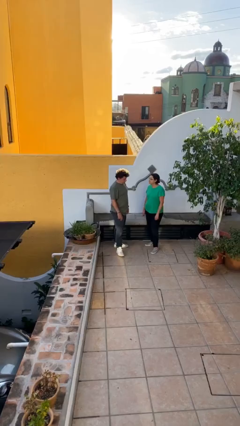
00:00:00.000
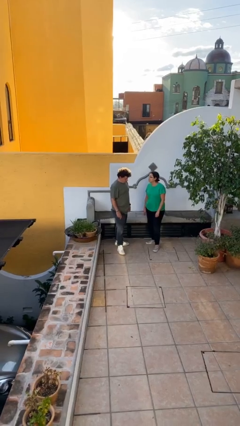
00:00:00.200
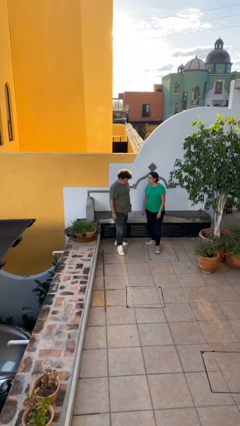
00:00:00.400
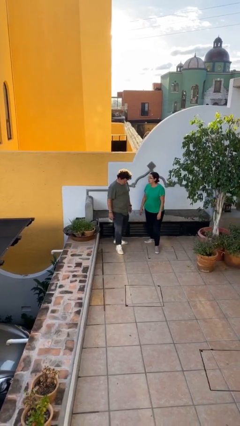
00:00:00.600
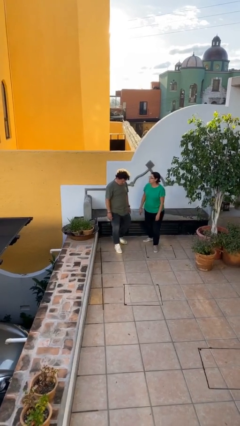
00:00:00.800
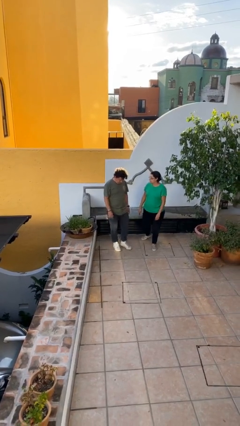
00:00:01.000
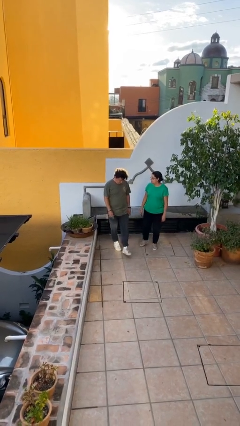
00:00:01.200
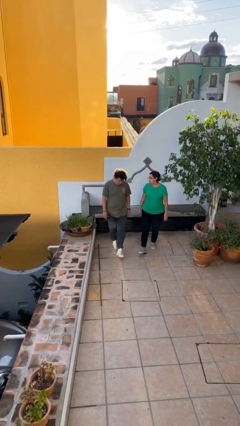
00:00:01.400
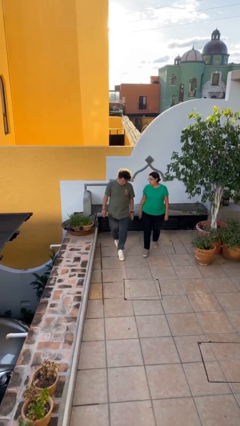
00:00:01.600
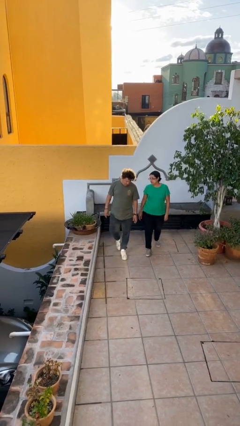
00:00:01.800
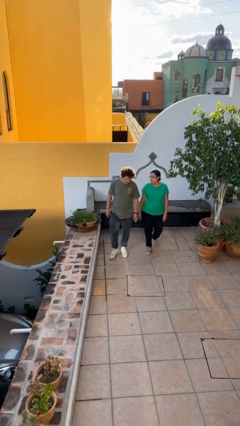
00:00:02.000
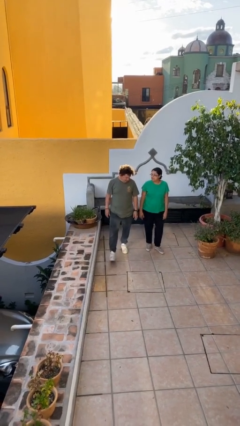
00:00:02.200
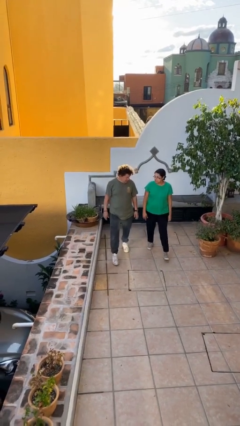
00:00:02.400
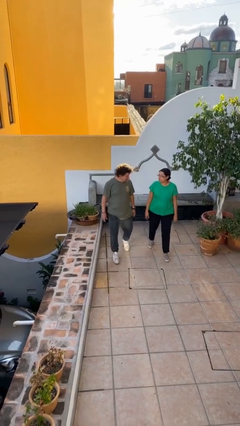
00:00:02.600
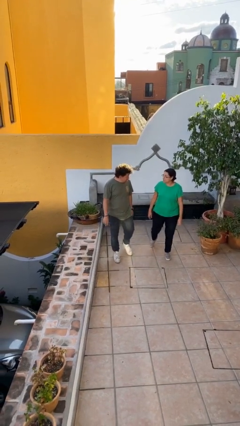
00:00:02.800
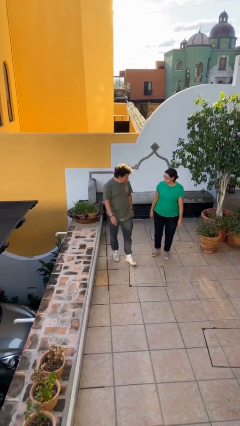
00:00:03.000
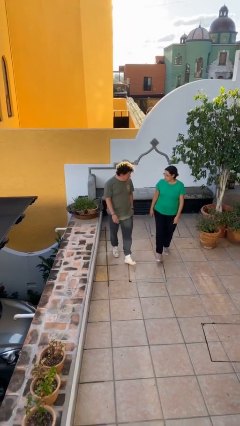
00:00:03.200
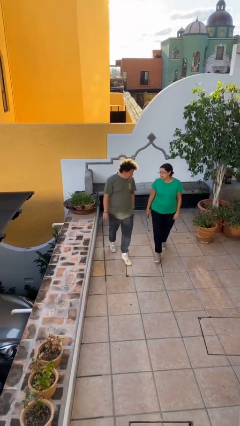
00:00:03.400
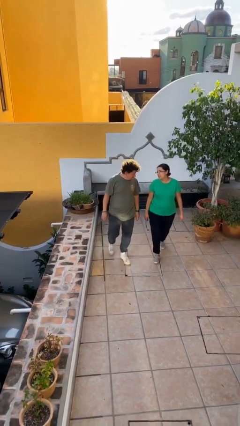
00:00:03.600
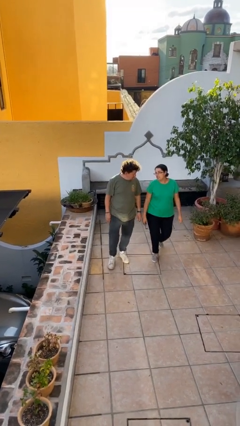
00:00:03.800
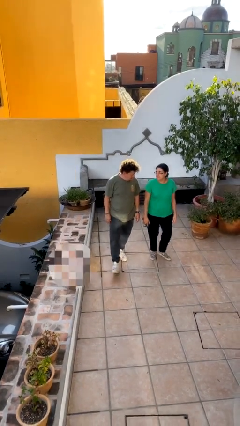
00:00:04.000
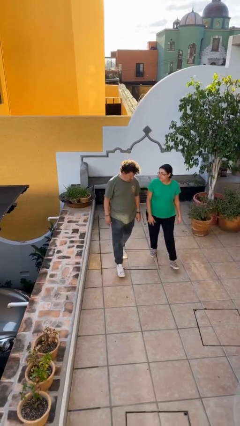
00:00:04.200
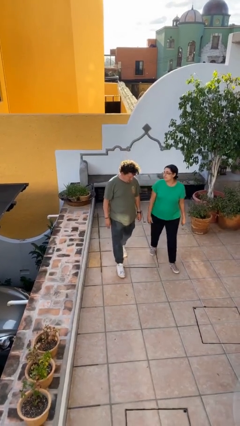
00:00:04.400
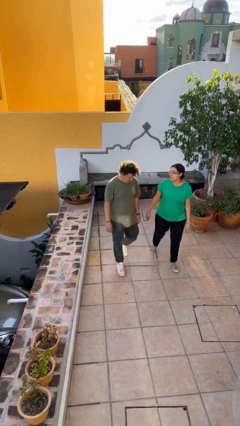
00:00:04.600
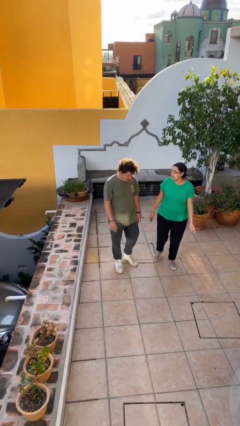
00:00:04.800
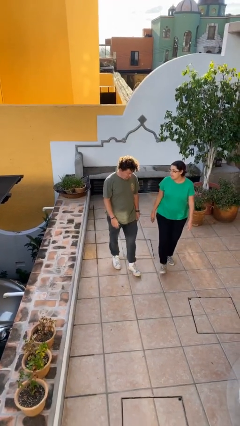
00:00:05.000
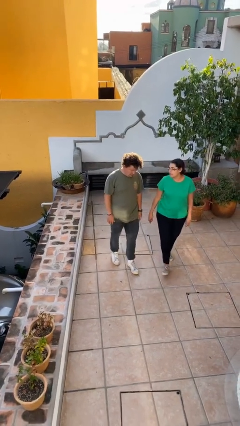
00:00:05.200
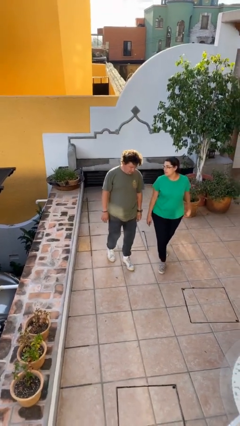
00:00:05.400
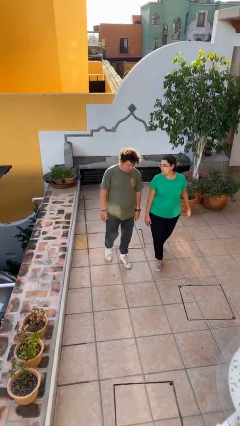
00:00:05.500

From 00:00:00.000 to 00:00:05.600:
person talks to person

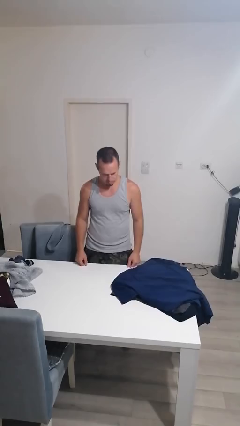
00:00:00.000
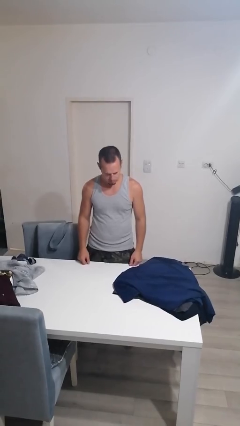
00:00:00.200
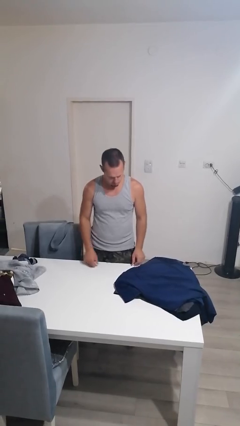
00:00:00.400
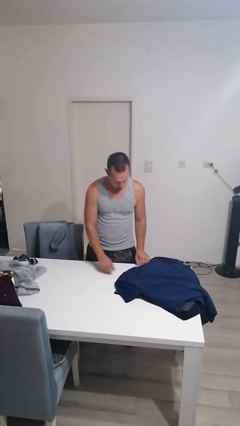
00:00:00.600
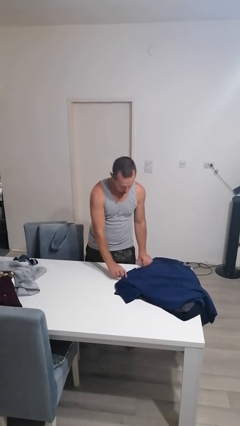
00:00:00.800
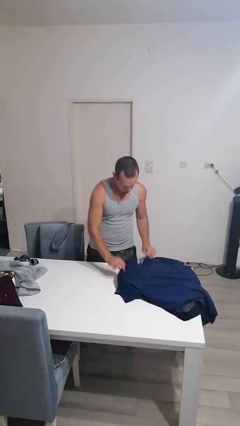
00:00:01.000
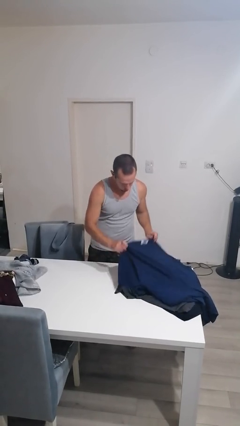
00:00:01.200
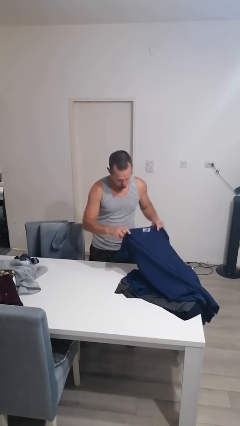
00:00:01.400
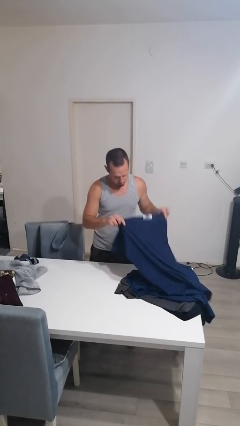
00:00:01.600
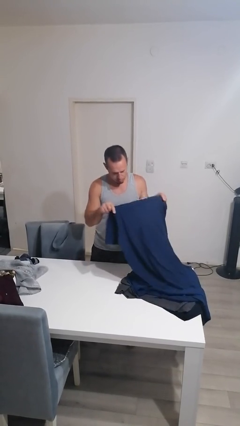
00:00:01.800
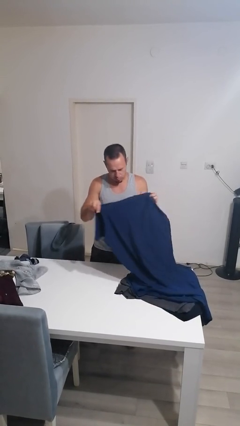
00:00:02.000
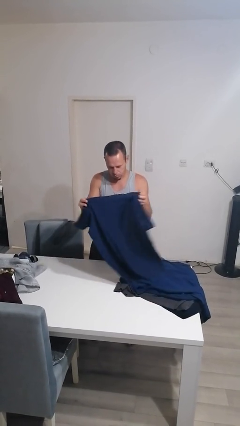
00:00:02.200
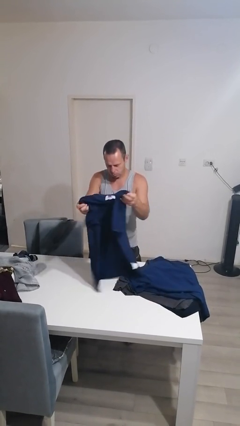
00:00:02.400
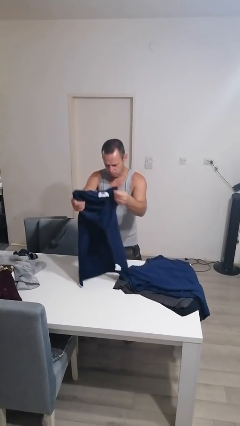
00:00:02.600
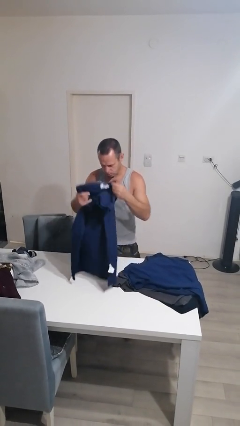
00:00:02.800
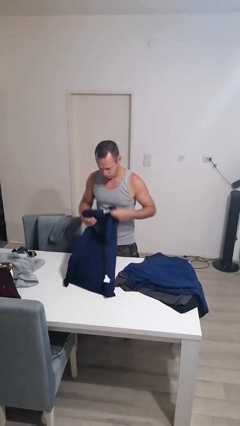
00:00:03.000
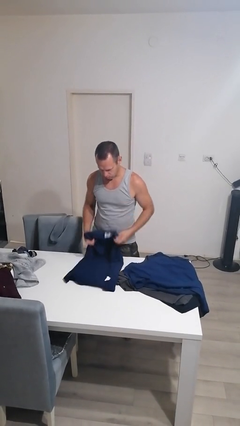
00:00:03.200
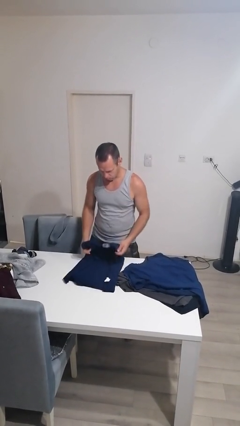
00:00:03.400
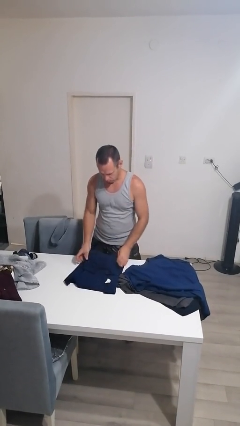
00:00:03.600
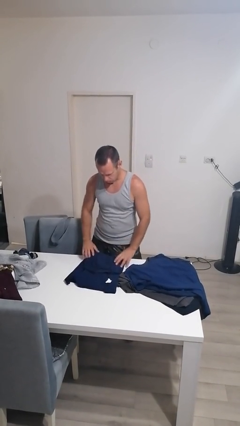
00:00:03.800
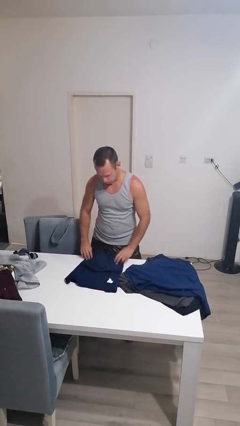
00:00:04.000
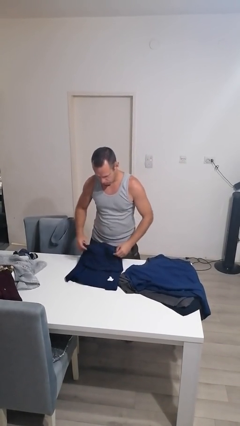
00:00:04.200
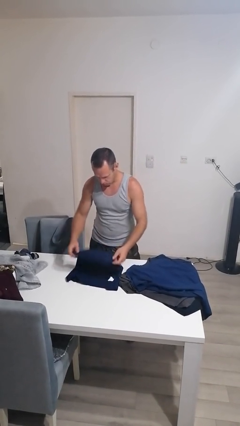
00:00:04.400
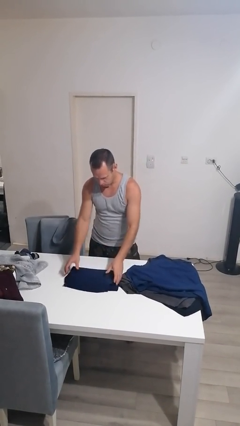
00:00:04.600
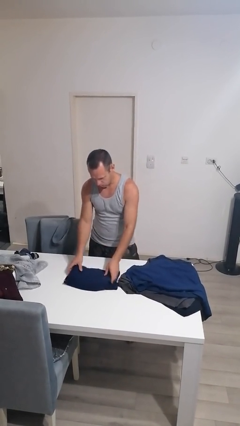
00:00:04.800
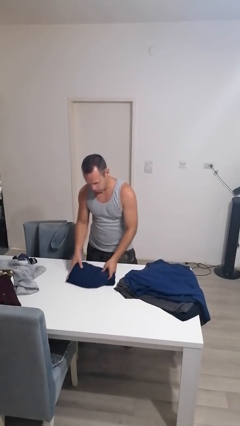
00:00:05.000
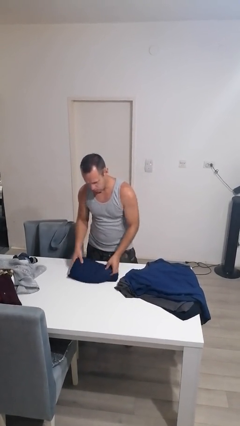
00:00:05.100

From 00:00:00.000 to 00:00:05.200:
person folds shirt

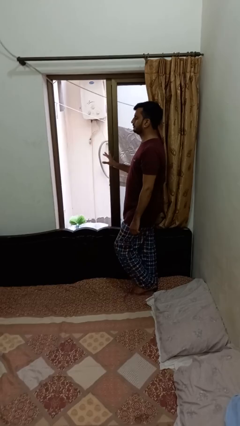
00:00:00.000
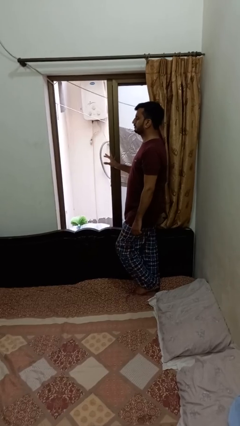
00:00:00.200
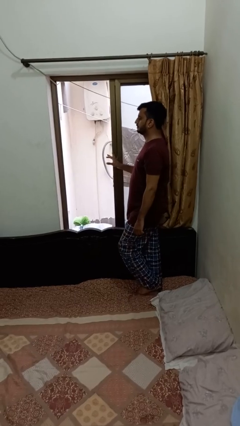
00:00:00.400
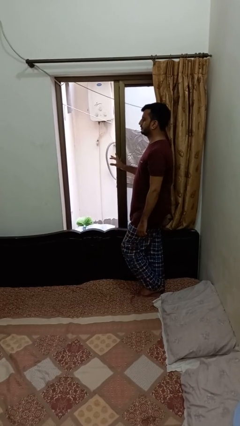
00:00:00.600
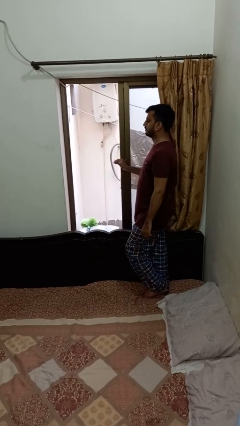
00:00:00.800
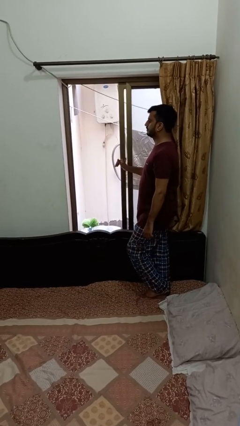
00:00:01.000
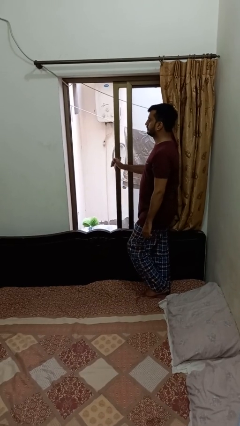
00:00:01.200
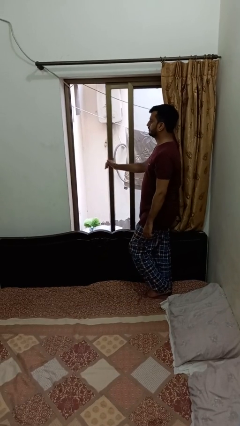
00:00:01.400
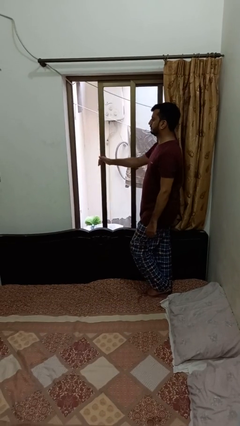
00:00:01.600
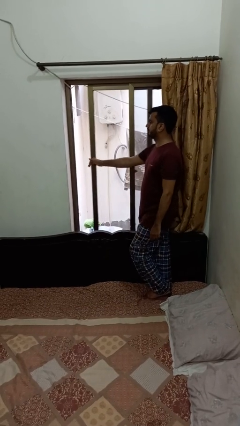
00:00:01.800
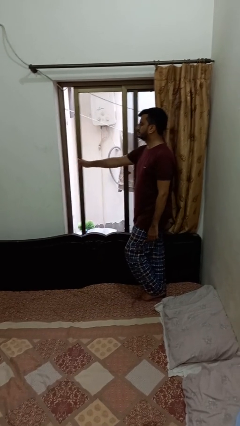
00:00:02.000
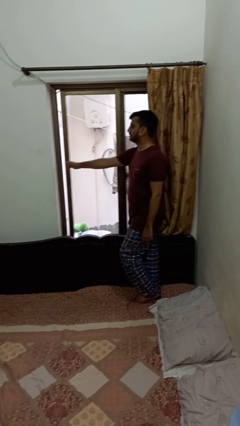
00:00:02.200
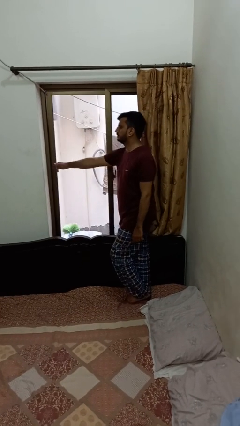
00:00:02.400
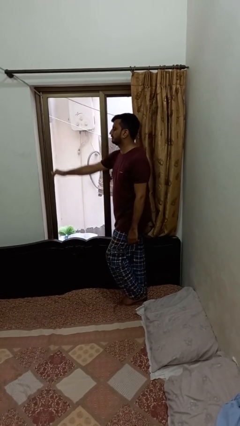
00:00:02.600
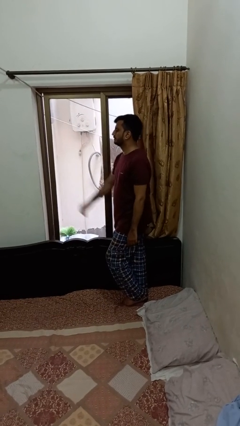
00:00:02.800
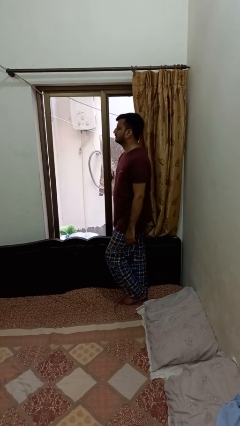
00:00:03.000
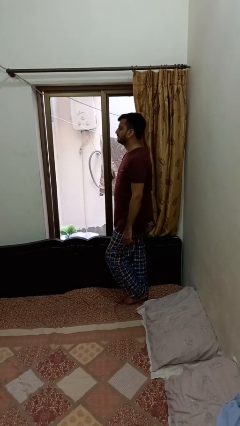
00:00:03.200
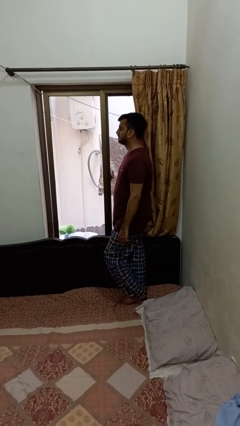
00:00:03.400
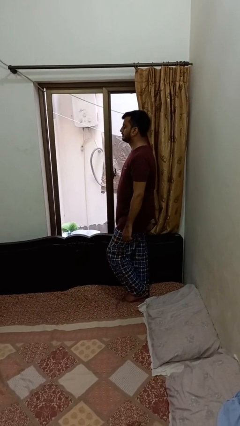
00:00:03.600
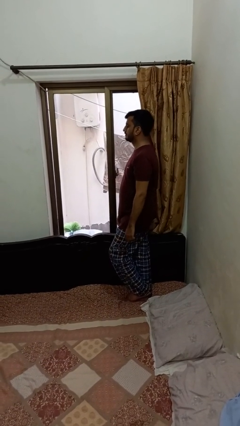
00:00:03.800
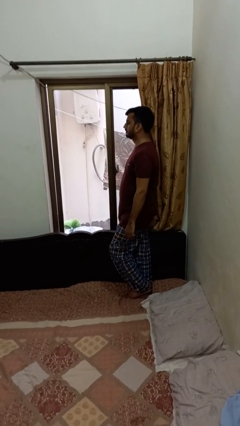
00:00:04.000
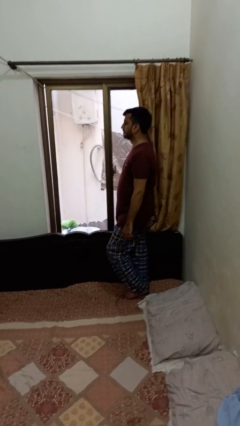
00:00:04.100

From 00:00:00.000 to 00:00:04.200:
person closes home window

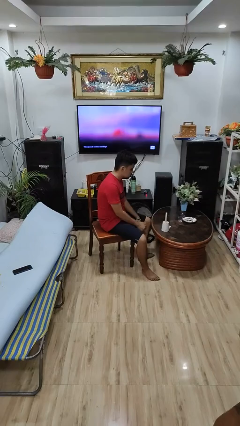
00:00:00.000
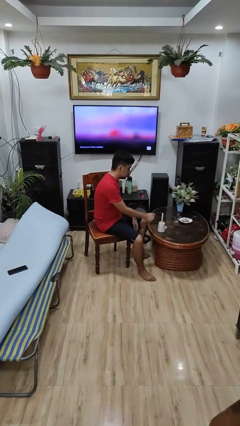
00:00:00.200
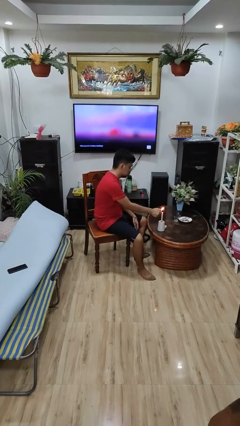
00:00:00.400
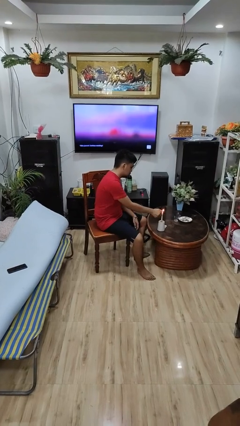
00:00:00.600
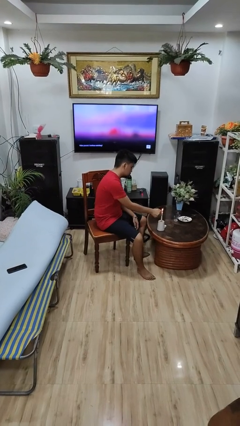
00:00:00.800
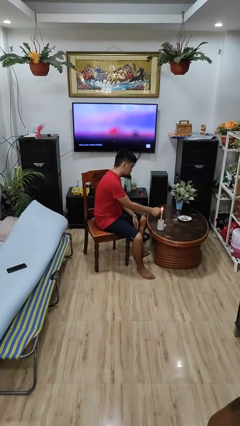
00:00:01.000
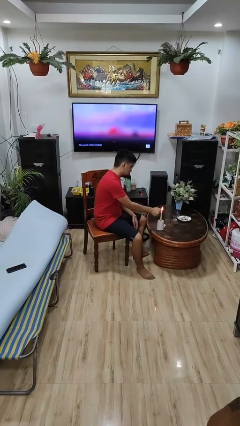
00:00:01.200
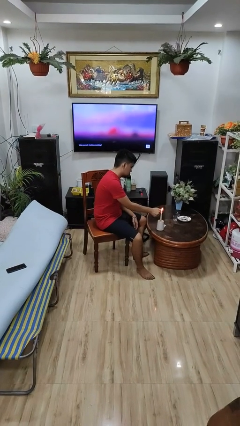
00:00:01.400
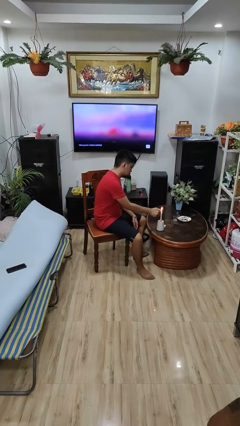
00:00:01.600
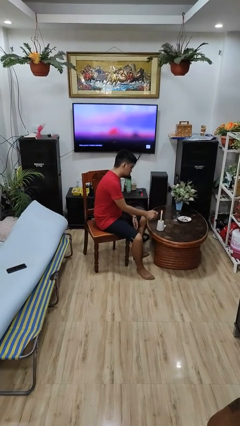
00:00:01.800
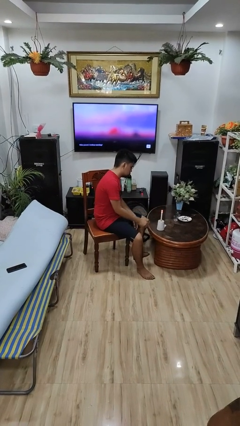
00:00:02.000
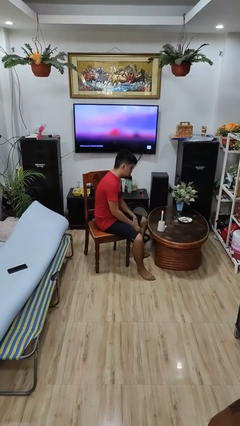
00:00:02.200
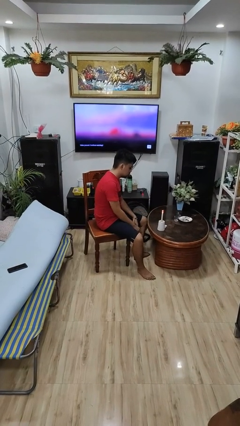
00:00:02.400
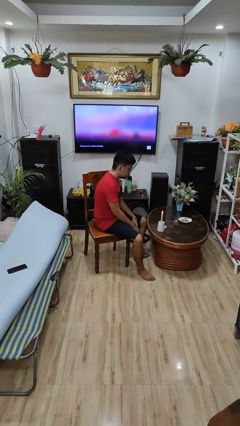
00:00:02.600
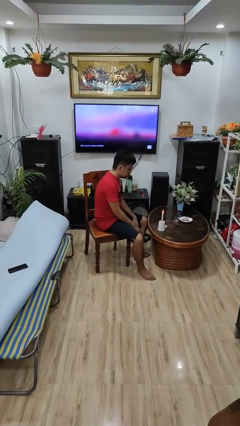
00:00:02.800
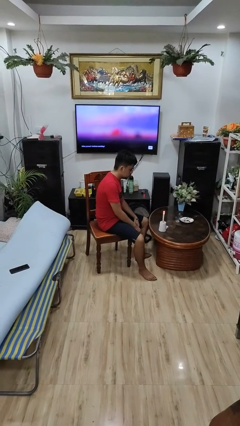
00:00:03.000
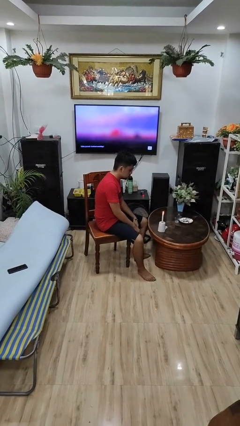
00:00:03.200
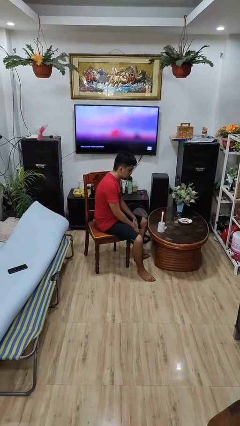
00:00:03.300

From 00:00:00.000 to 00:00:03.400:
person lights candle
